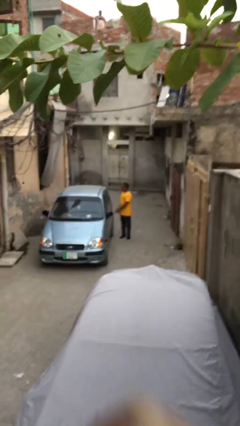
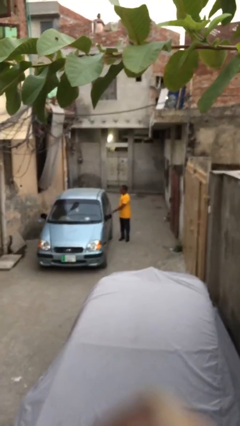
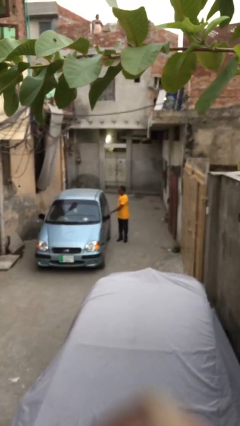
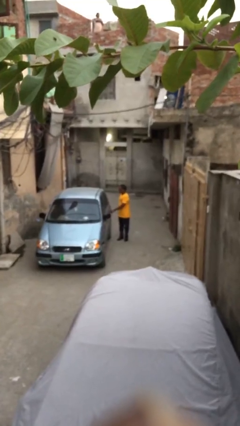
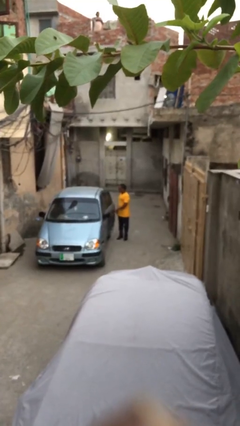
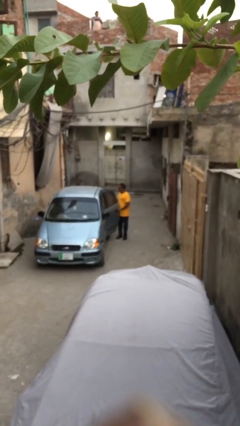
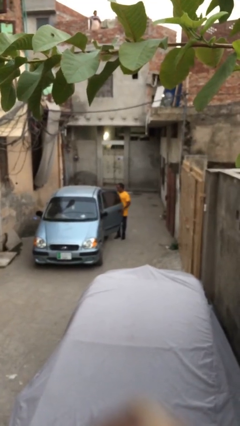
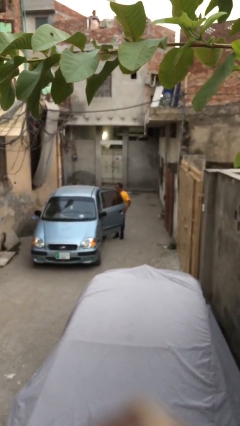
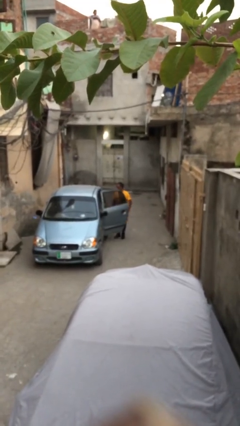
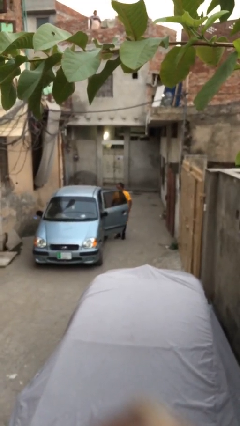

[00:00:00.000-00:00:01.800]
person opens car door

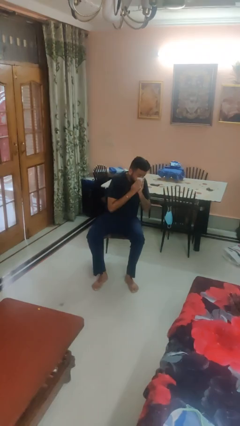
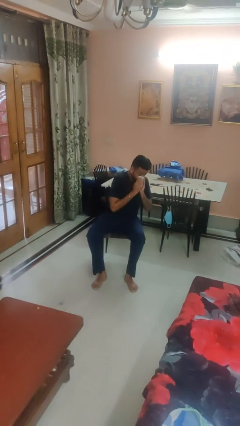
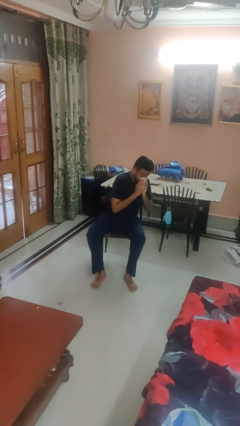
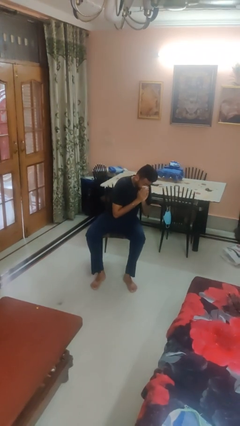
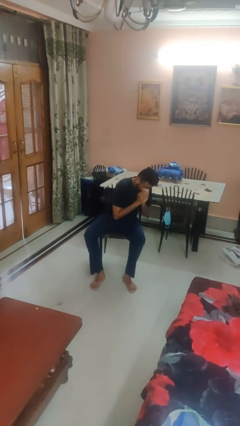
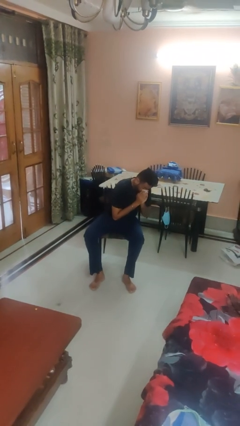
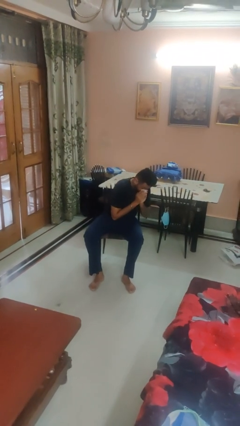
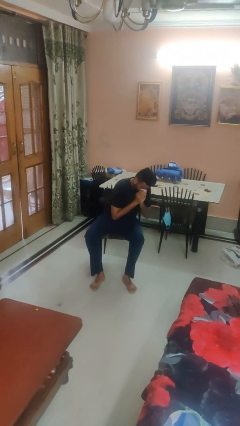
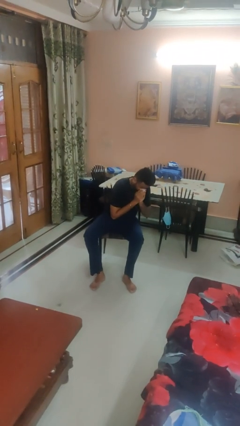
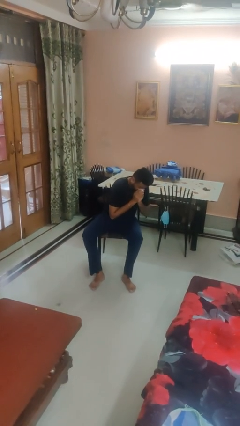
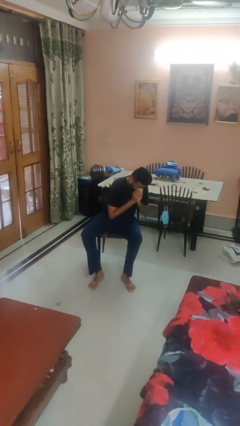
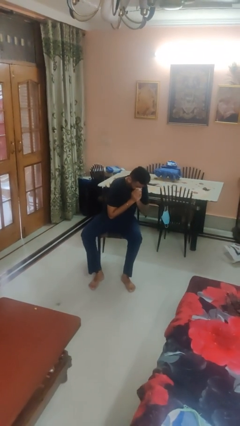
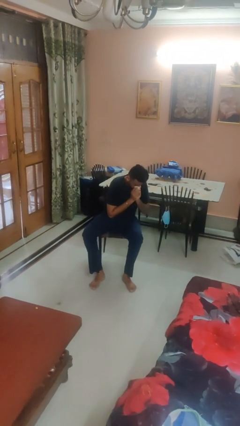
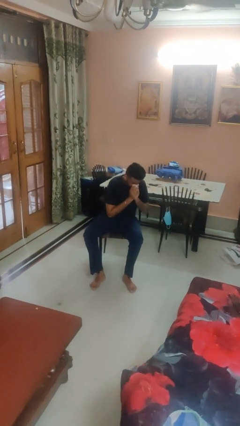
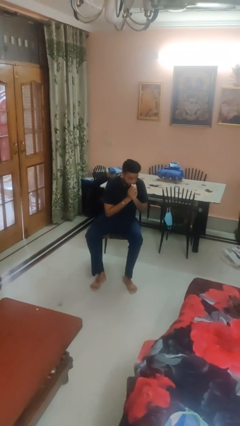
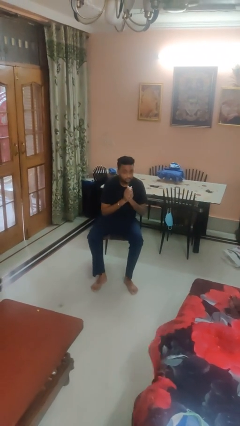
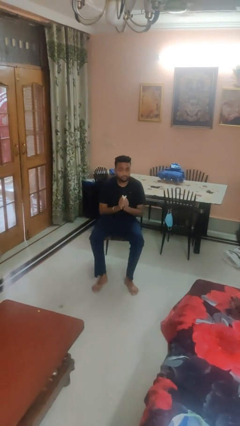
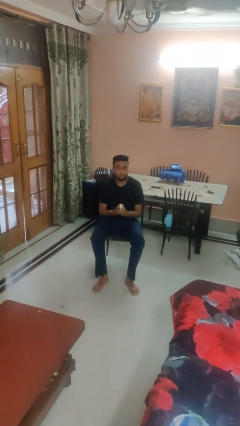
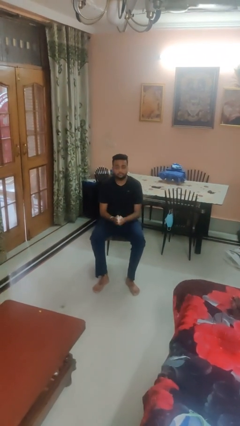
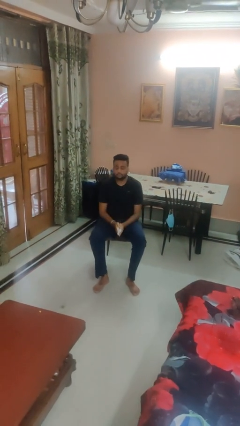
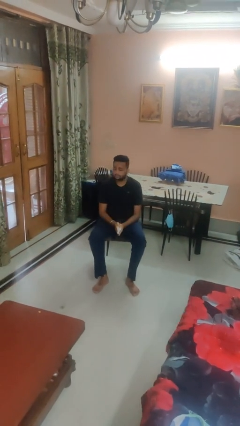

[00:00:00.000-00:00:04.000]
person blows nose

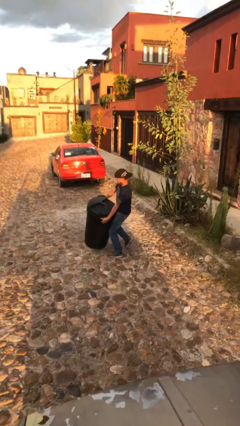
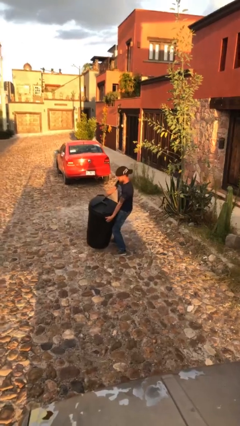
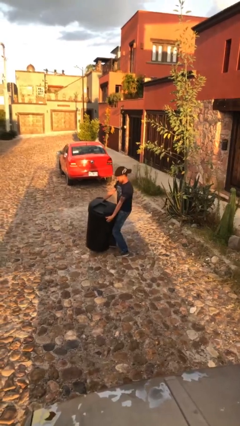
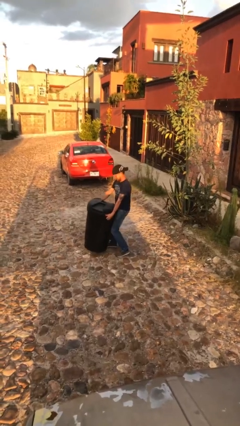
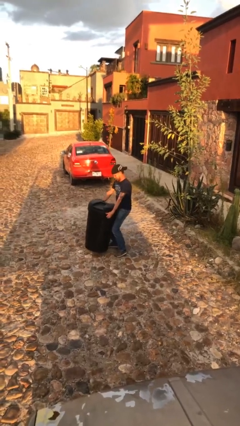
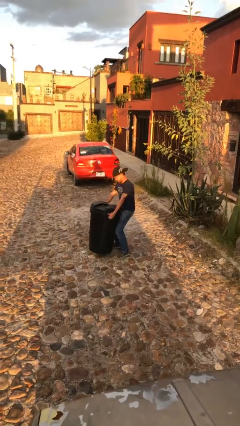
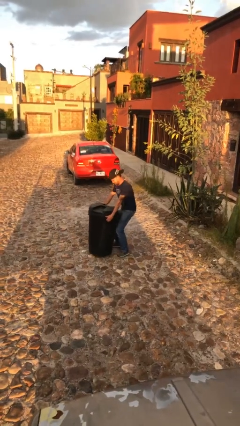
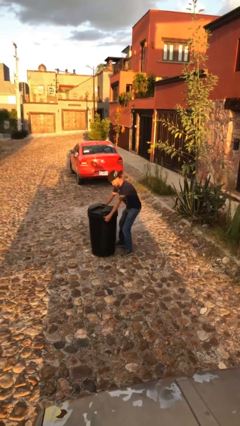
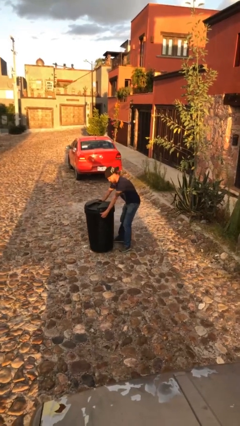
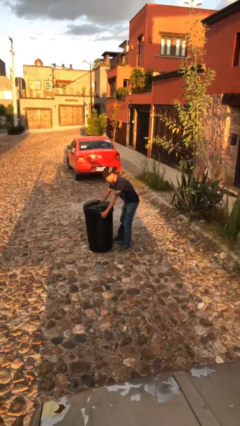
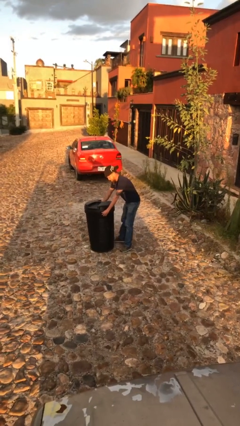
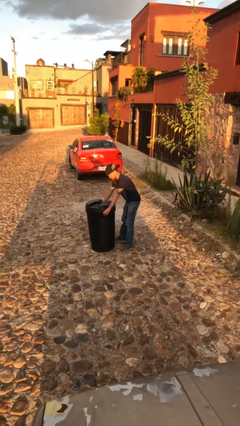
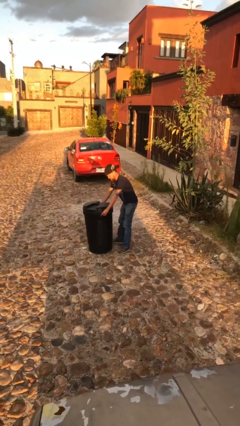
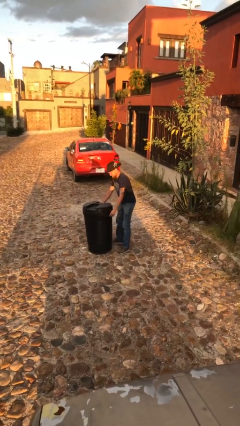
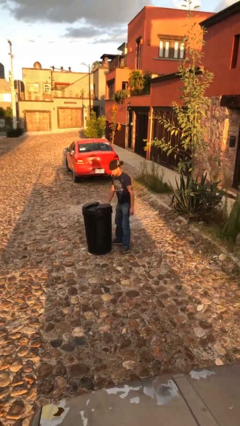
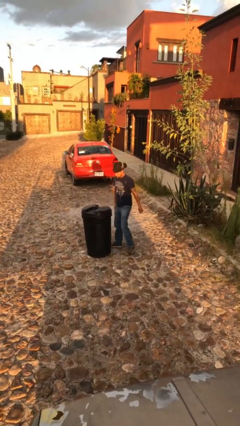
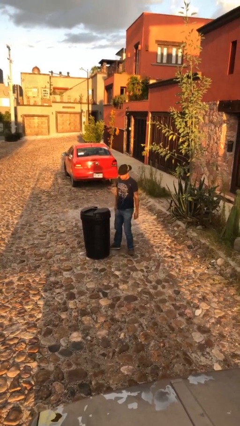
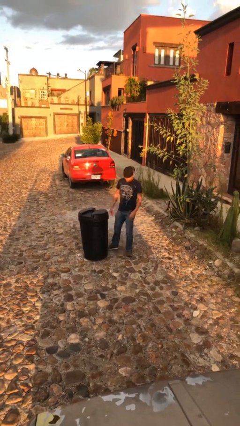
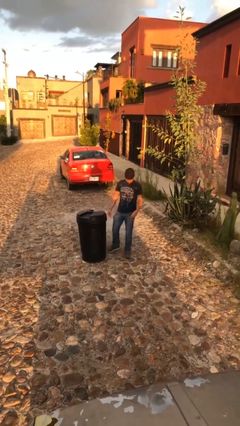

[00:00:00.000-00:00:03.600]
person puts down object on floor

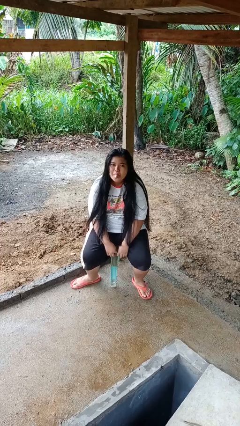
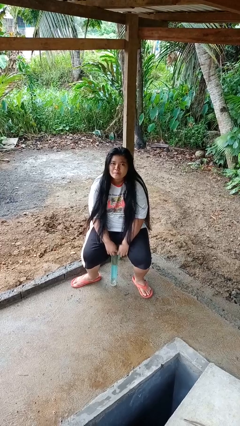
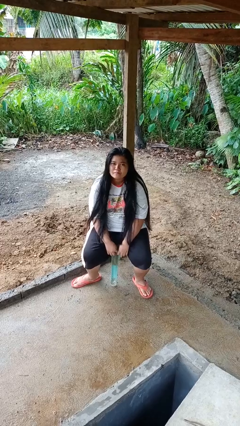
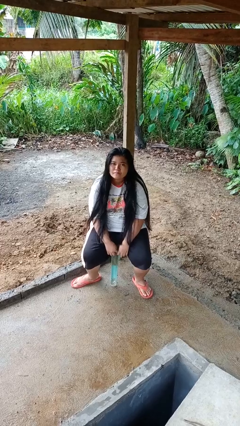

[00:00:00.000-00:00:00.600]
person sticks out tongue

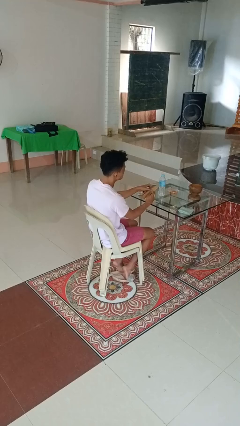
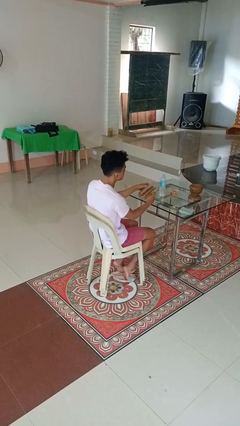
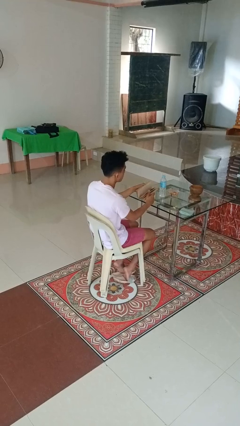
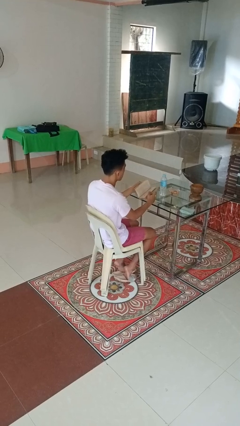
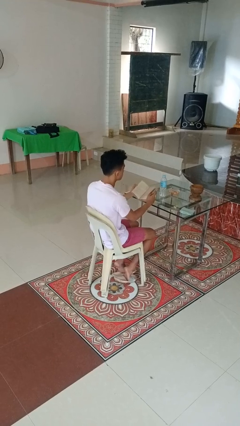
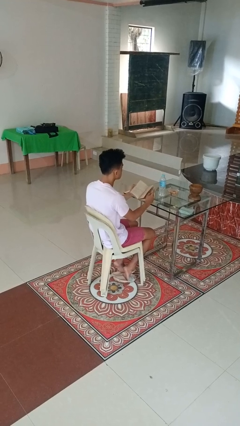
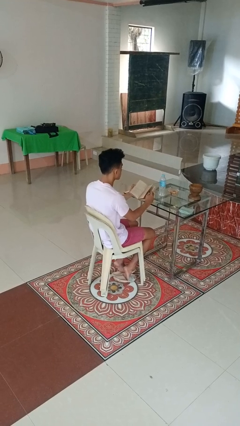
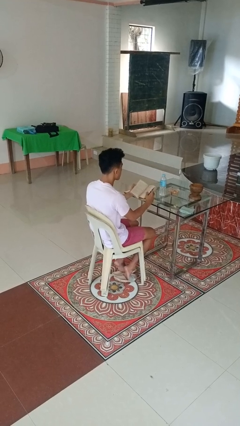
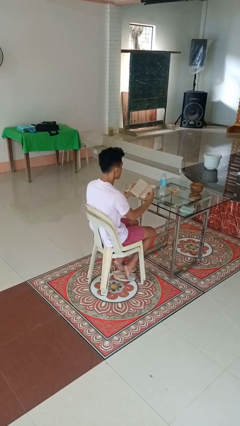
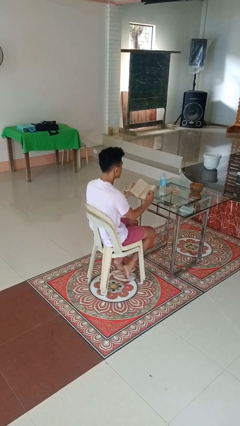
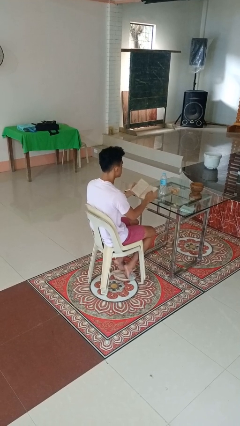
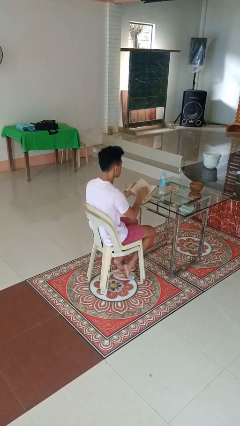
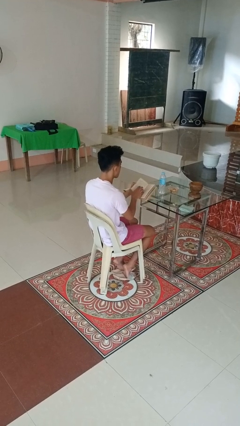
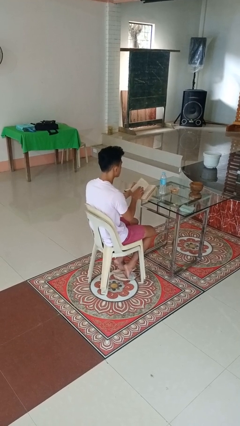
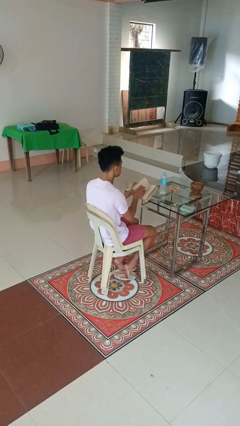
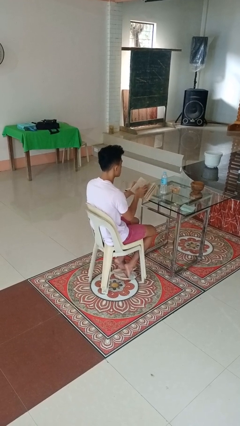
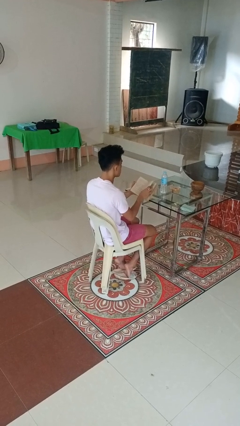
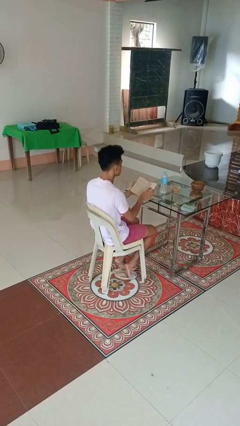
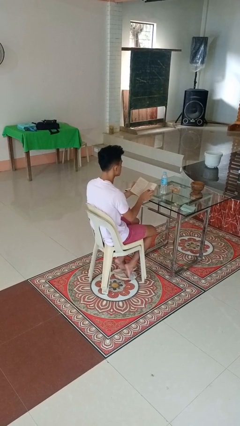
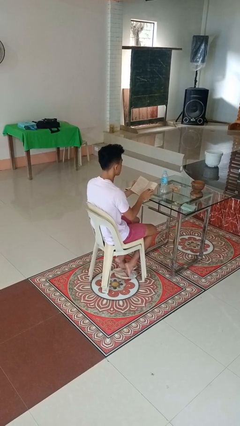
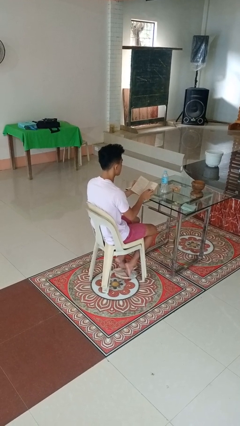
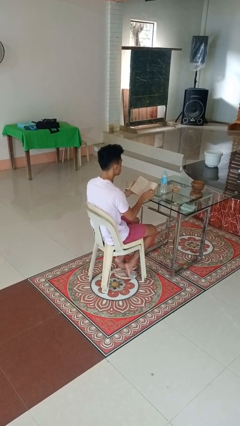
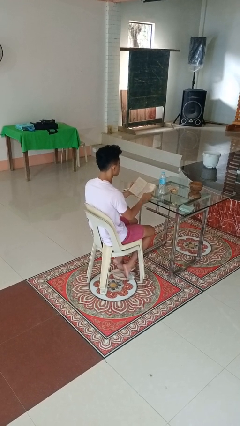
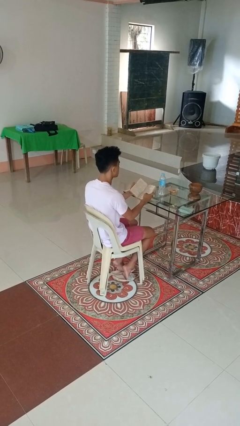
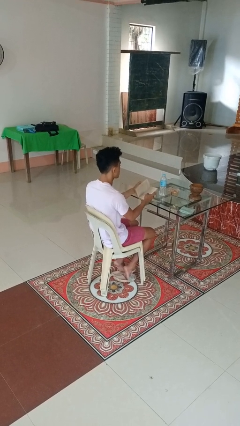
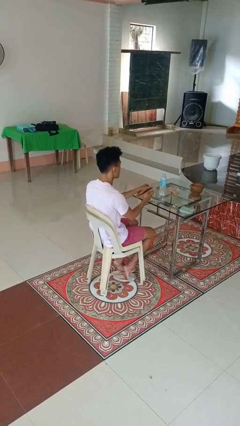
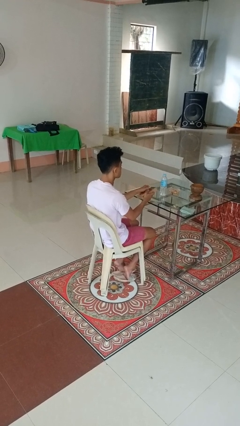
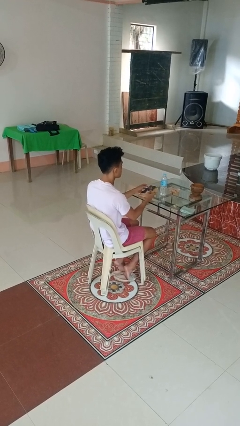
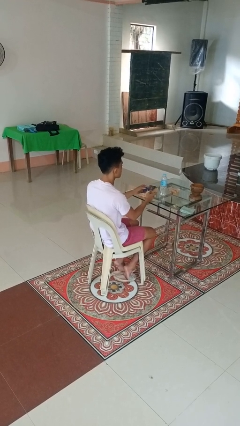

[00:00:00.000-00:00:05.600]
person reads book

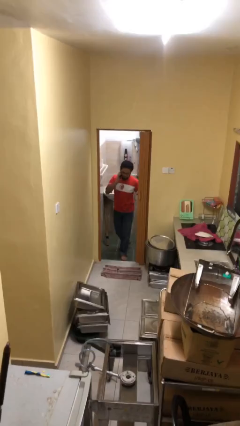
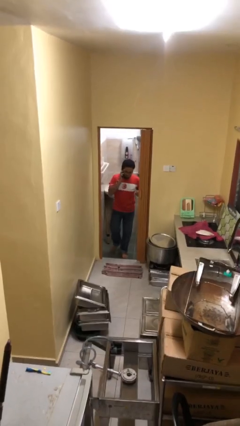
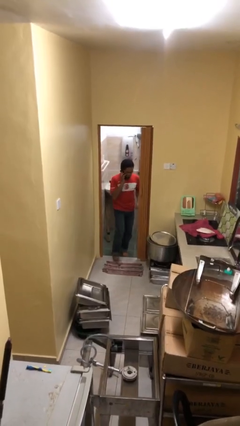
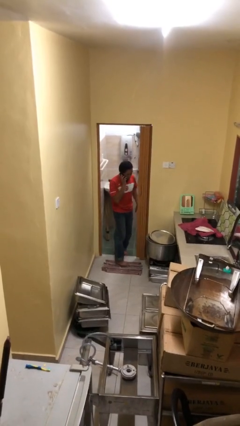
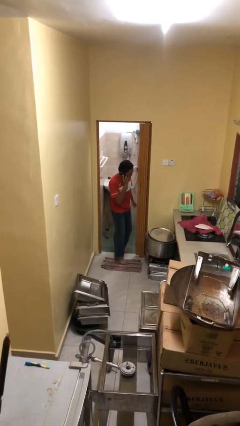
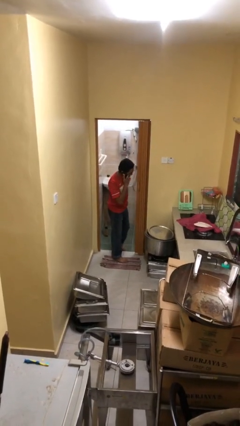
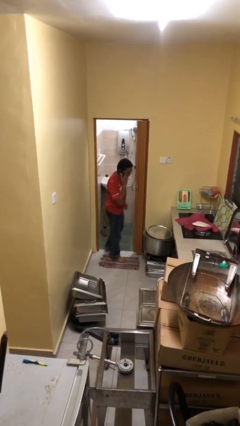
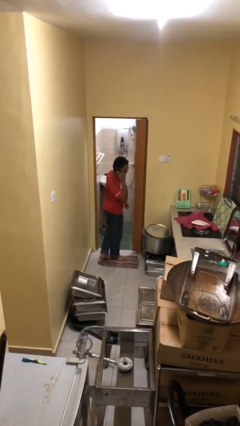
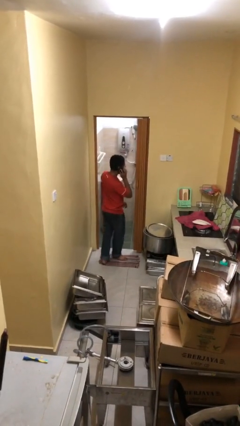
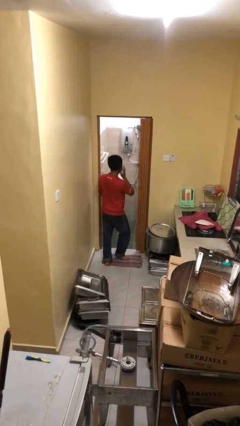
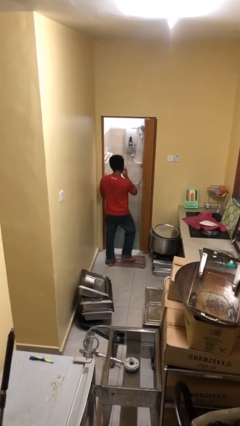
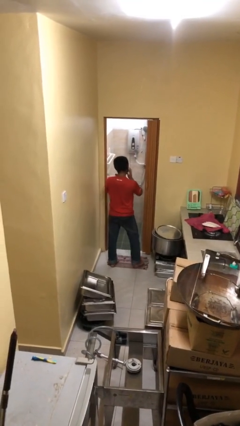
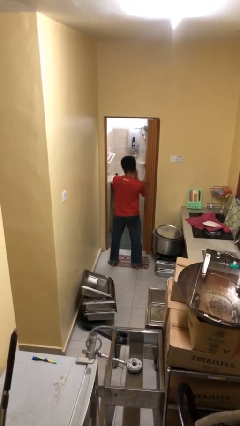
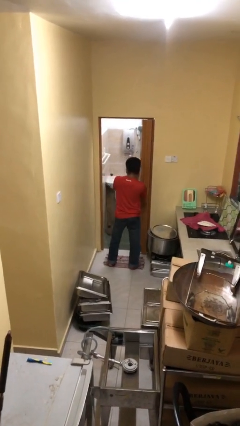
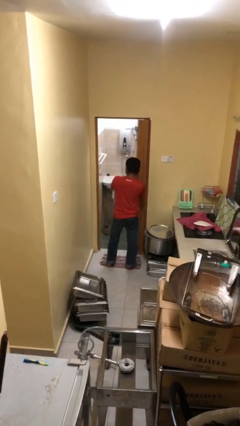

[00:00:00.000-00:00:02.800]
person enters scene through structure
